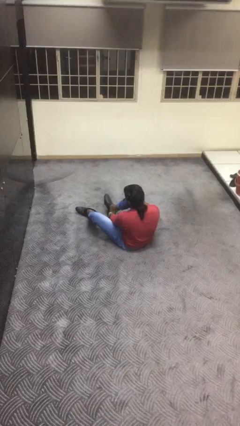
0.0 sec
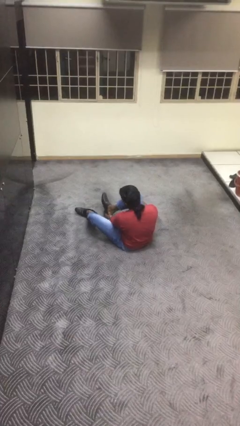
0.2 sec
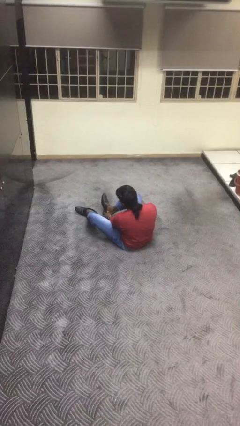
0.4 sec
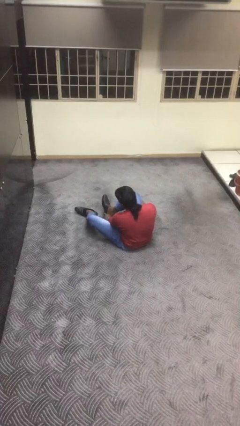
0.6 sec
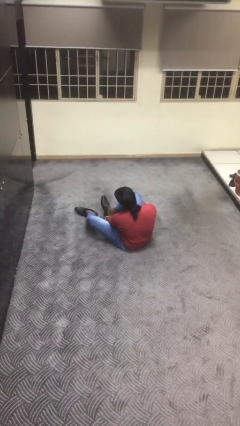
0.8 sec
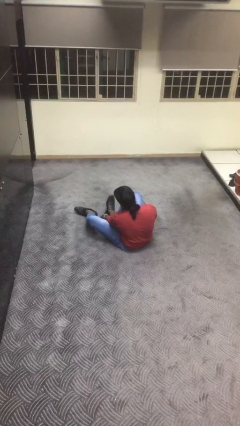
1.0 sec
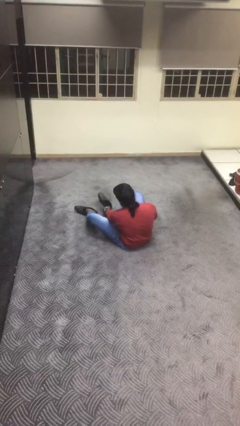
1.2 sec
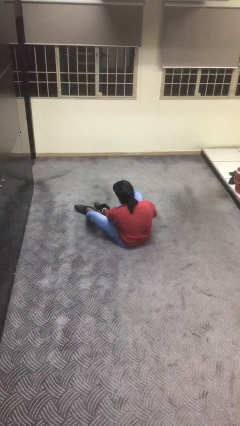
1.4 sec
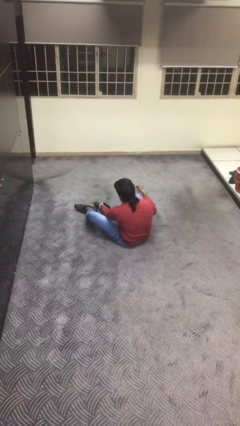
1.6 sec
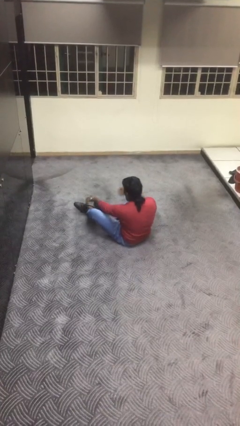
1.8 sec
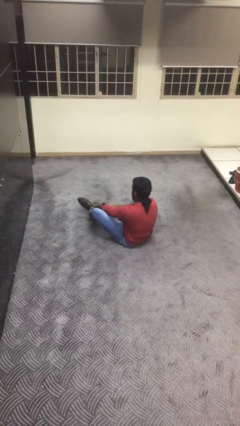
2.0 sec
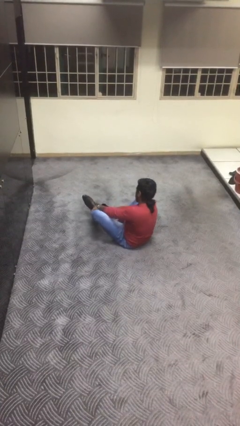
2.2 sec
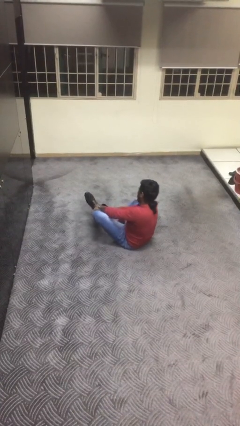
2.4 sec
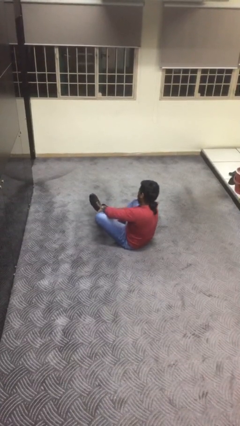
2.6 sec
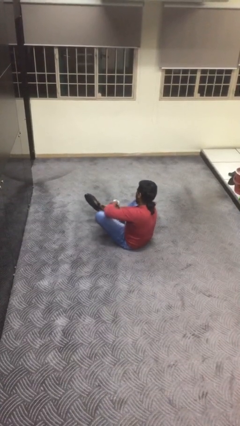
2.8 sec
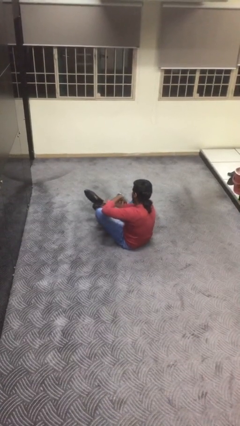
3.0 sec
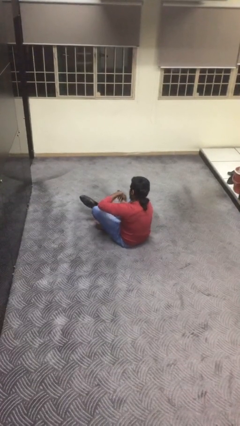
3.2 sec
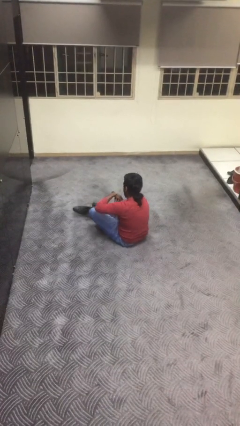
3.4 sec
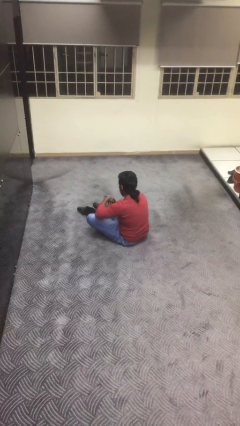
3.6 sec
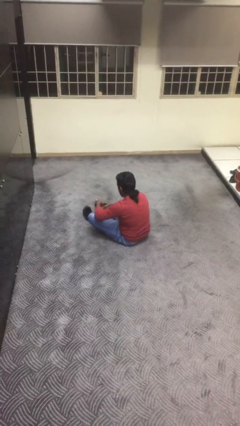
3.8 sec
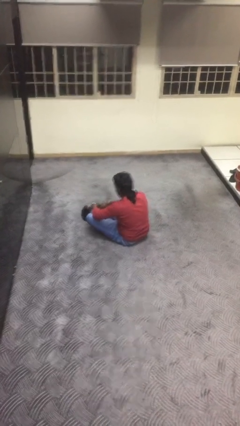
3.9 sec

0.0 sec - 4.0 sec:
person takes off shoes

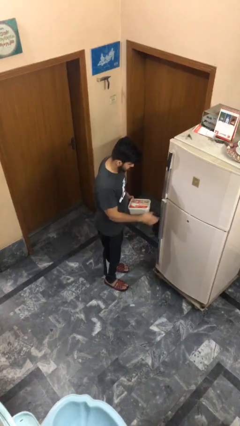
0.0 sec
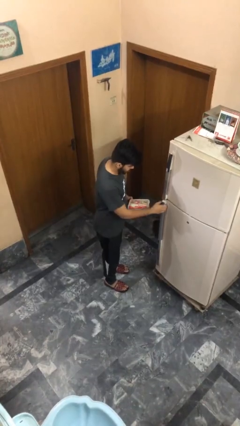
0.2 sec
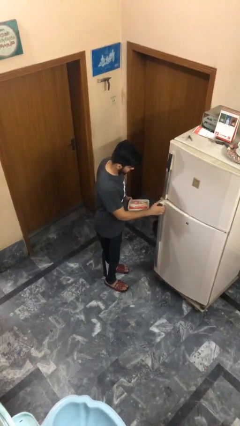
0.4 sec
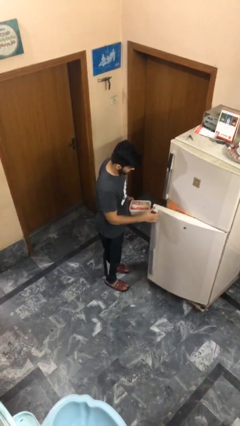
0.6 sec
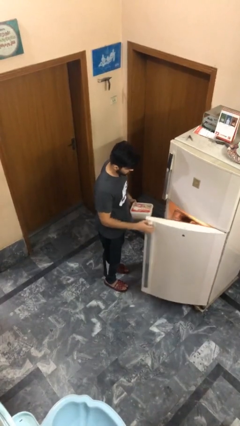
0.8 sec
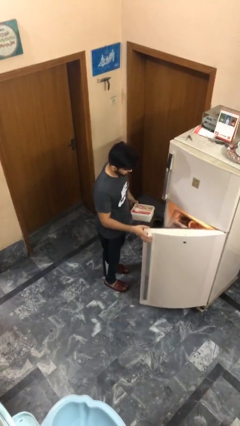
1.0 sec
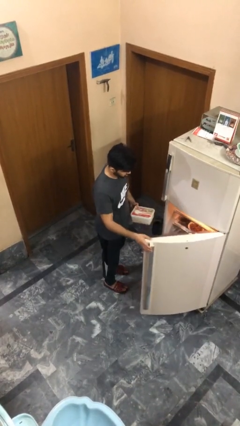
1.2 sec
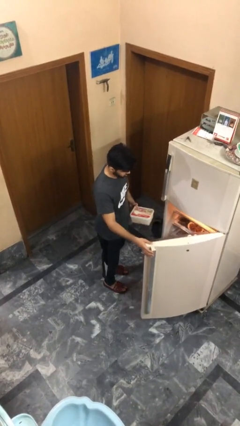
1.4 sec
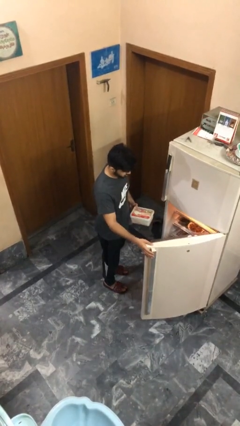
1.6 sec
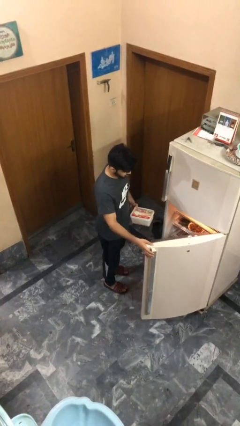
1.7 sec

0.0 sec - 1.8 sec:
person opens refrigerator

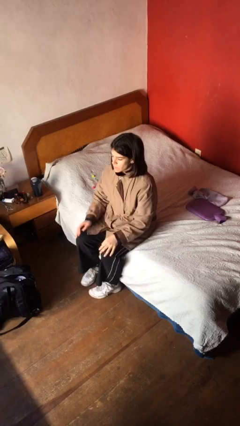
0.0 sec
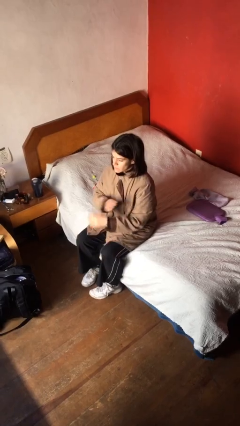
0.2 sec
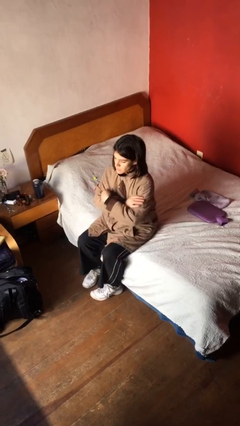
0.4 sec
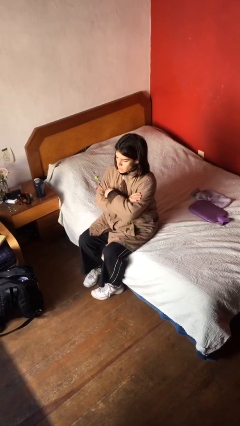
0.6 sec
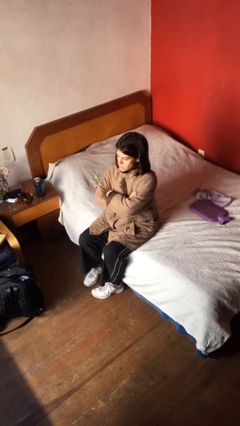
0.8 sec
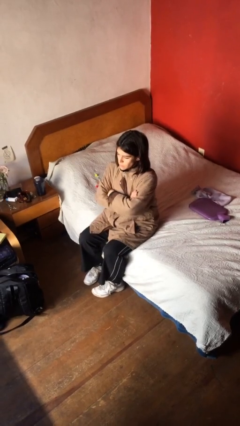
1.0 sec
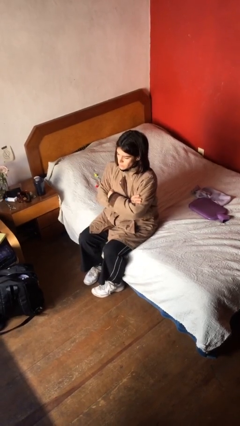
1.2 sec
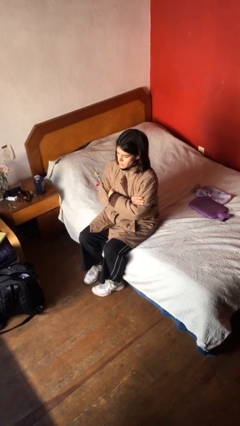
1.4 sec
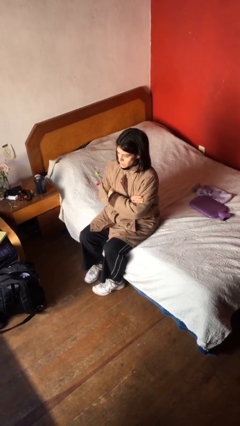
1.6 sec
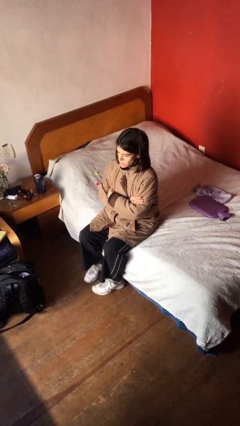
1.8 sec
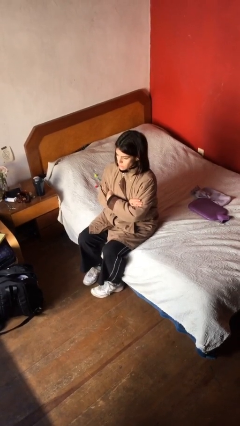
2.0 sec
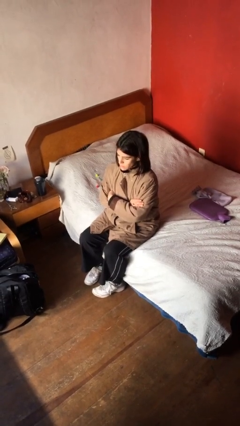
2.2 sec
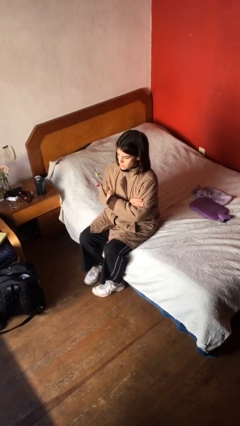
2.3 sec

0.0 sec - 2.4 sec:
person crosses arms

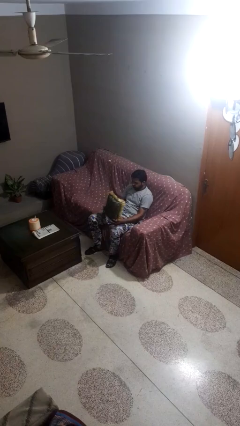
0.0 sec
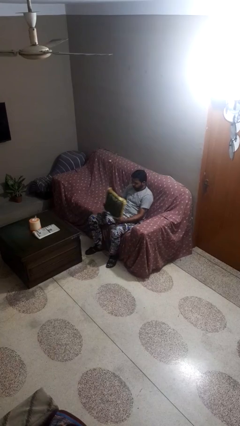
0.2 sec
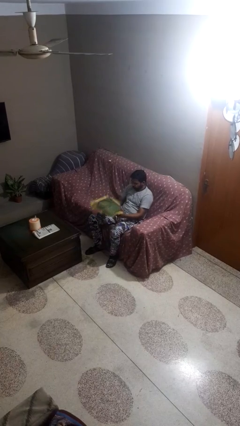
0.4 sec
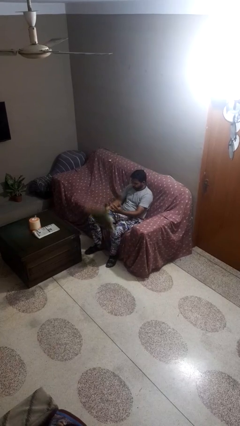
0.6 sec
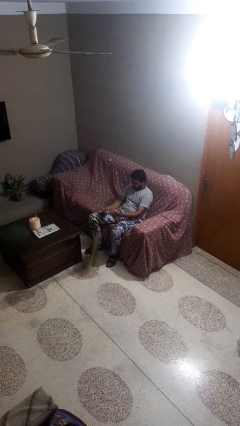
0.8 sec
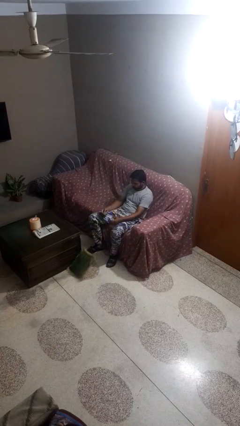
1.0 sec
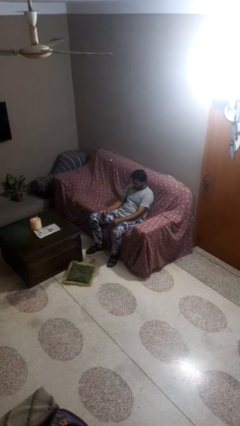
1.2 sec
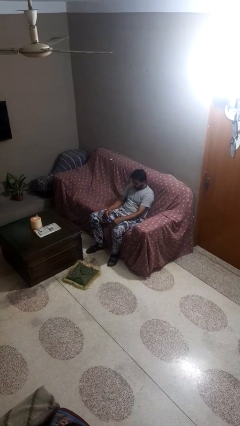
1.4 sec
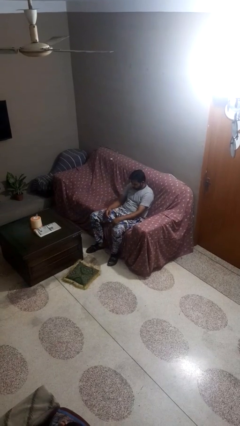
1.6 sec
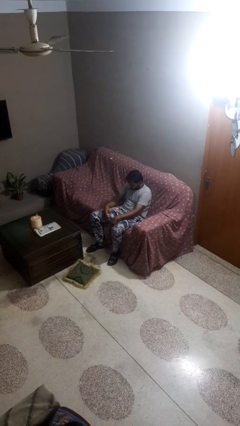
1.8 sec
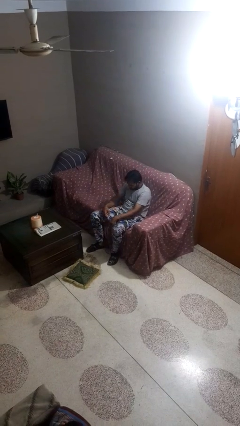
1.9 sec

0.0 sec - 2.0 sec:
person drops object

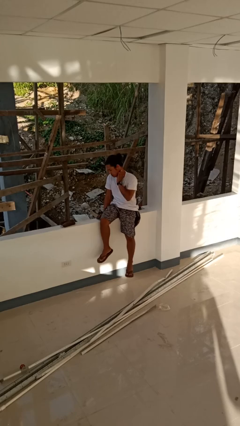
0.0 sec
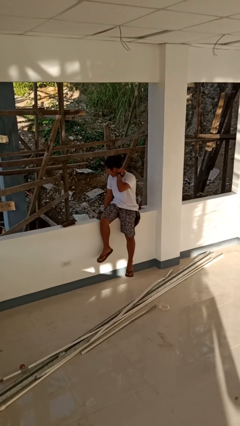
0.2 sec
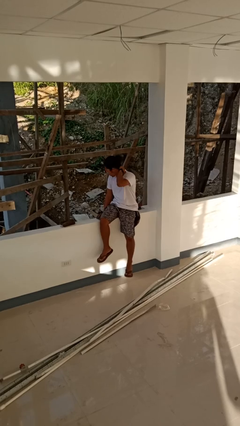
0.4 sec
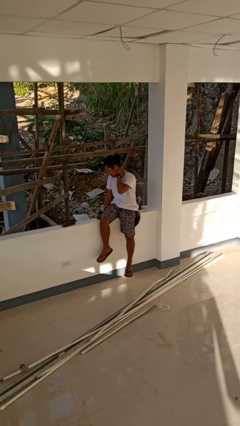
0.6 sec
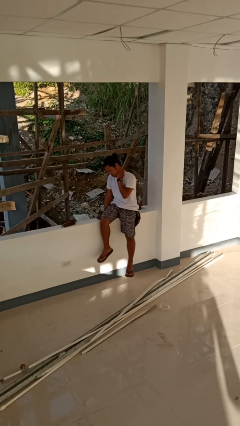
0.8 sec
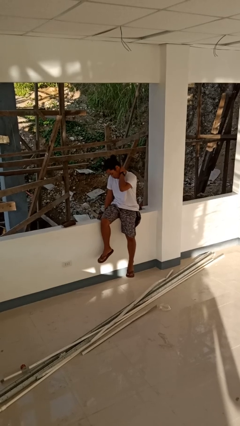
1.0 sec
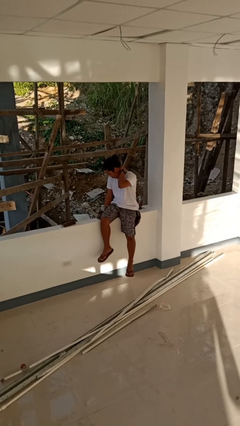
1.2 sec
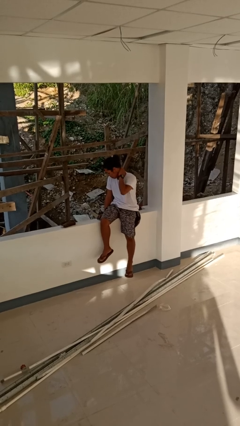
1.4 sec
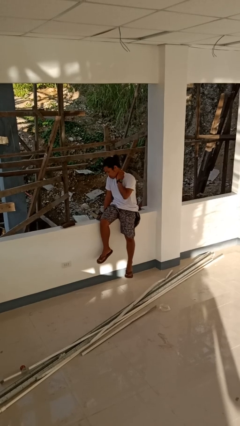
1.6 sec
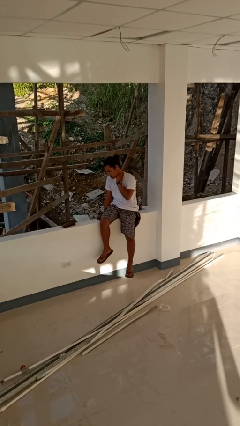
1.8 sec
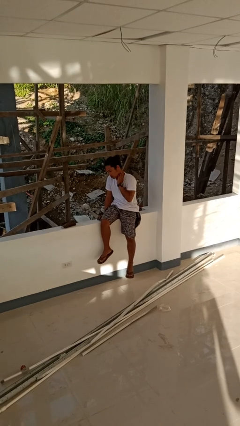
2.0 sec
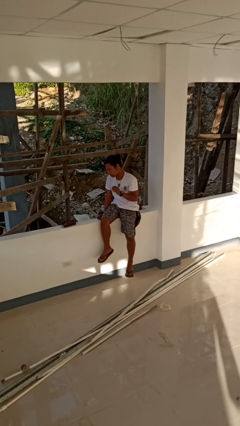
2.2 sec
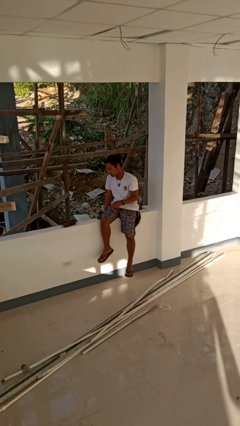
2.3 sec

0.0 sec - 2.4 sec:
person rubs neck

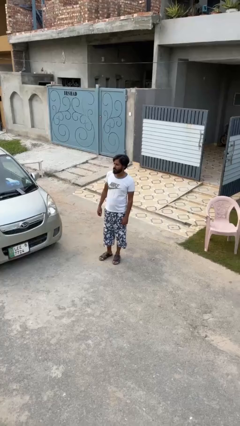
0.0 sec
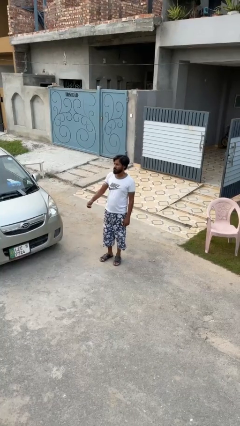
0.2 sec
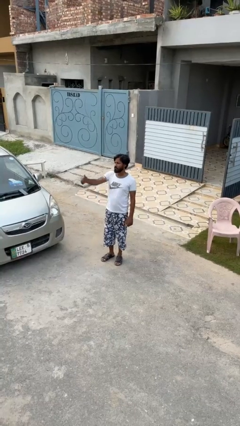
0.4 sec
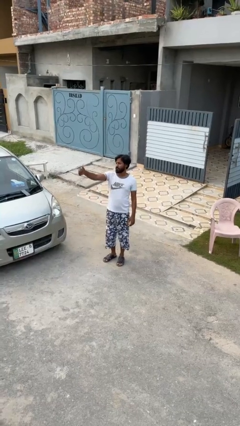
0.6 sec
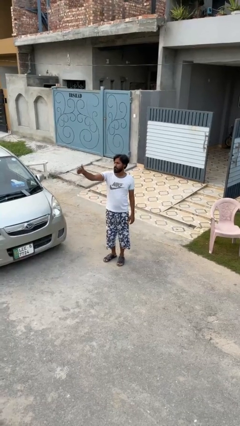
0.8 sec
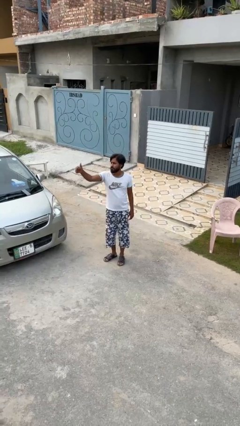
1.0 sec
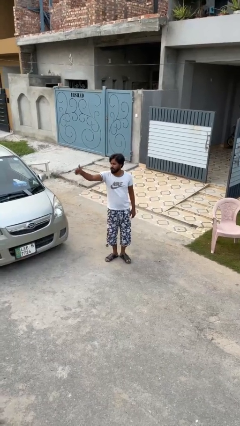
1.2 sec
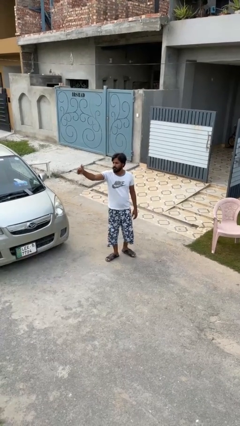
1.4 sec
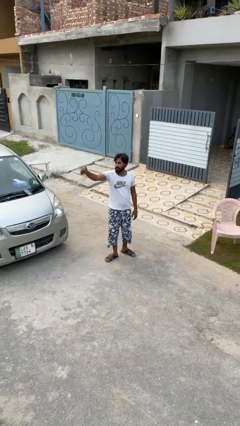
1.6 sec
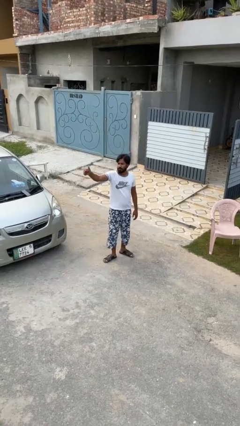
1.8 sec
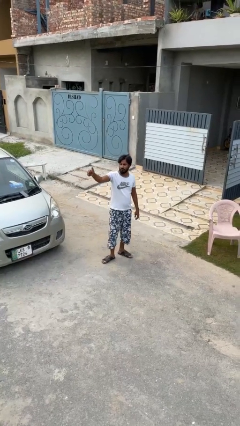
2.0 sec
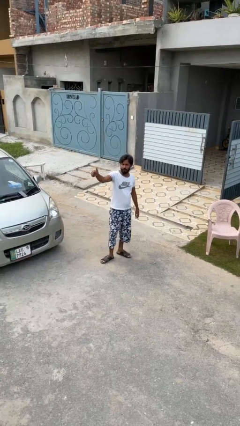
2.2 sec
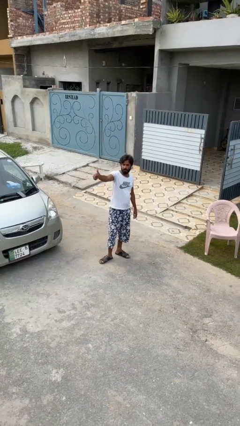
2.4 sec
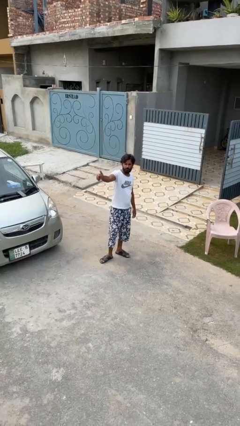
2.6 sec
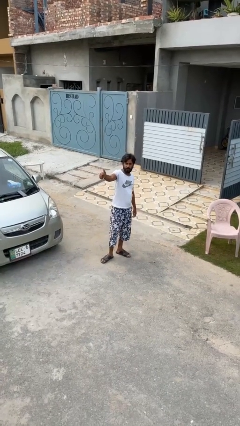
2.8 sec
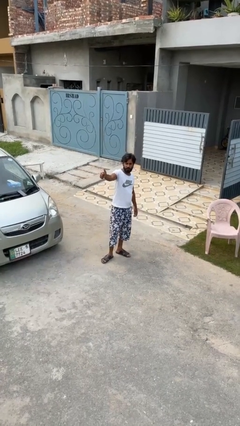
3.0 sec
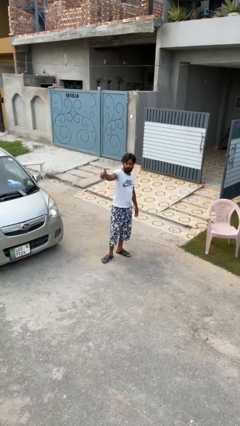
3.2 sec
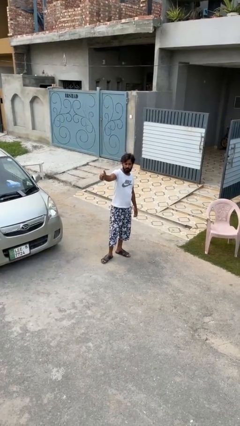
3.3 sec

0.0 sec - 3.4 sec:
person gestures thumbs up

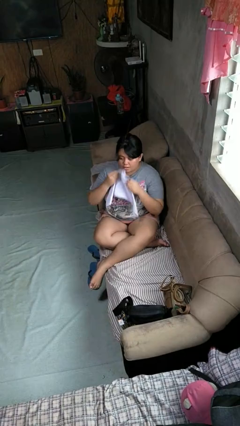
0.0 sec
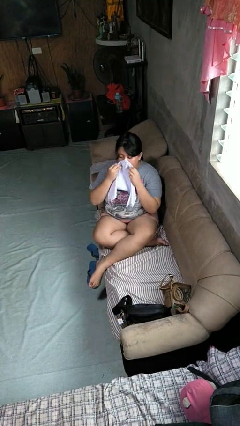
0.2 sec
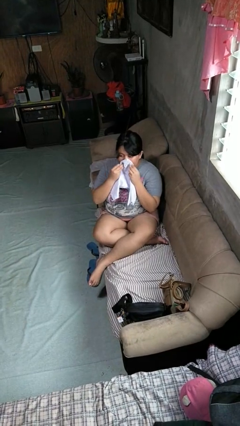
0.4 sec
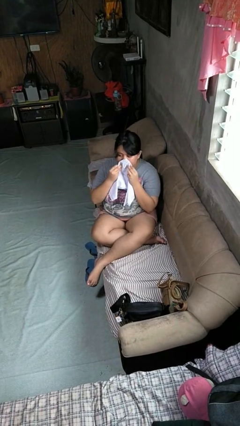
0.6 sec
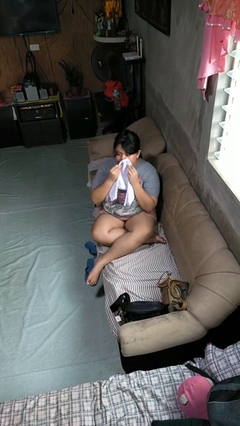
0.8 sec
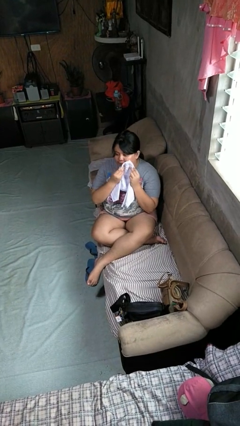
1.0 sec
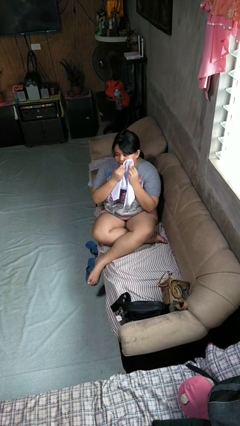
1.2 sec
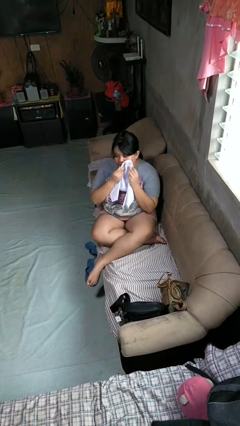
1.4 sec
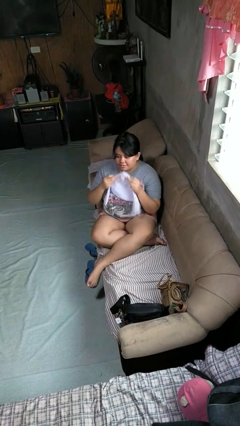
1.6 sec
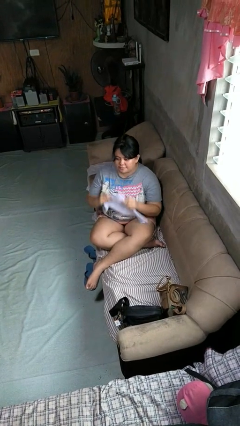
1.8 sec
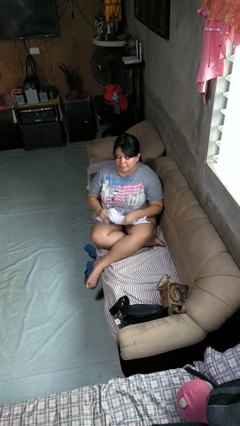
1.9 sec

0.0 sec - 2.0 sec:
person wipes mouth with napkin
